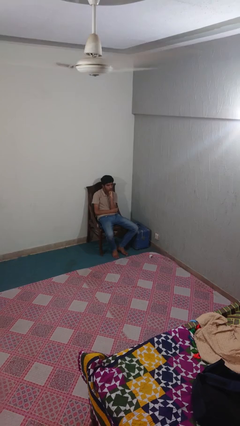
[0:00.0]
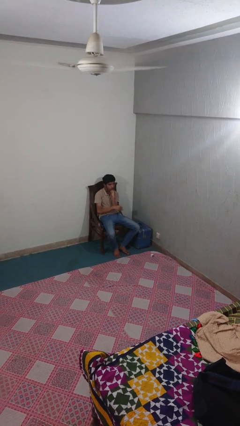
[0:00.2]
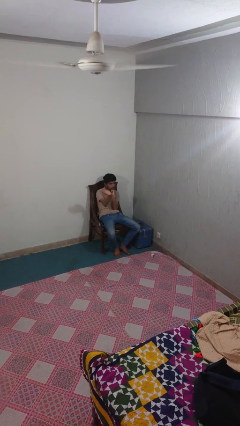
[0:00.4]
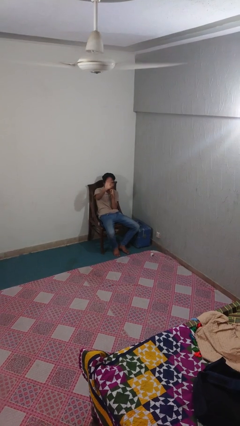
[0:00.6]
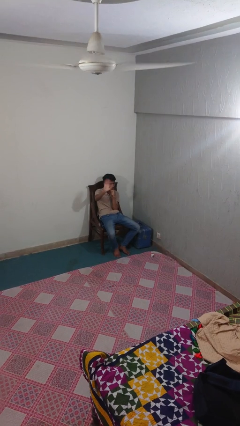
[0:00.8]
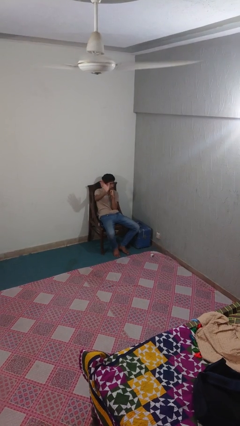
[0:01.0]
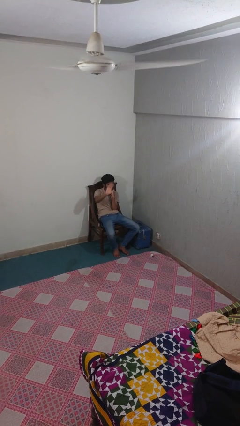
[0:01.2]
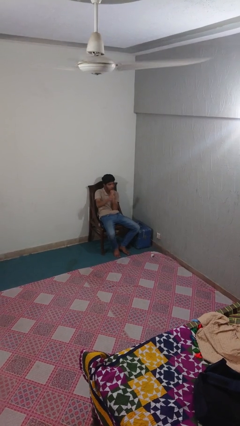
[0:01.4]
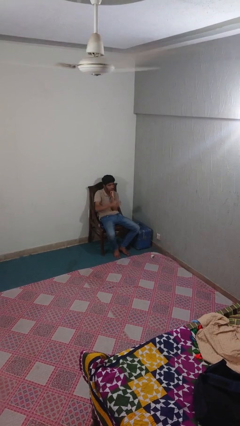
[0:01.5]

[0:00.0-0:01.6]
person waves at person

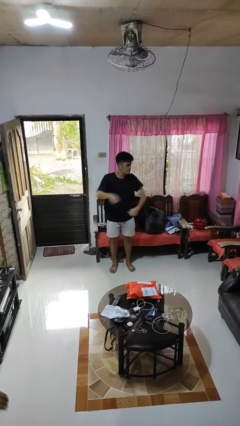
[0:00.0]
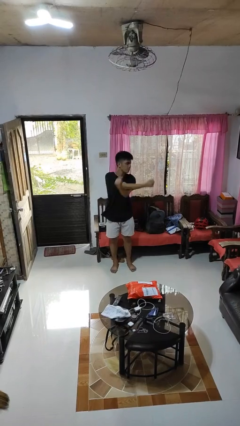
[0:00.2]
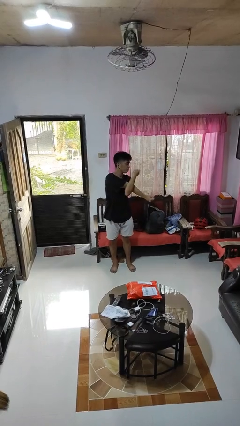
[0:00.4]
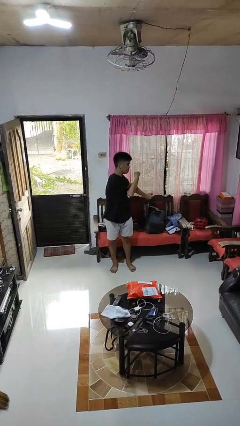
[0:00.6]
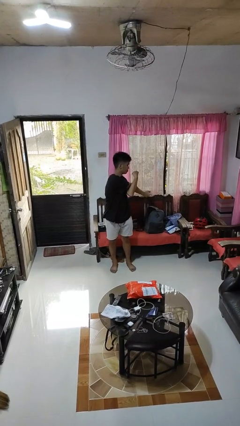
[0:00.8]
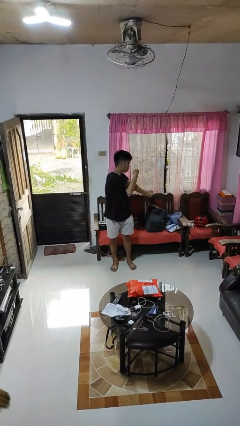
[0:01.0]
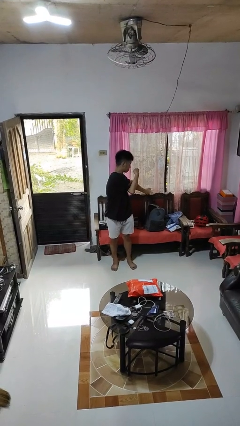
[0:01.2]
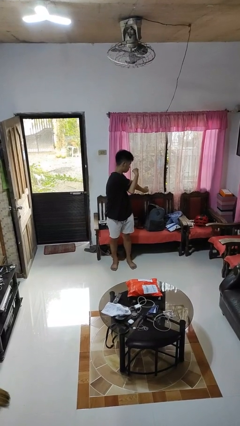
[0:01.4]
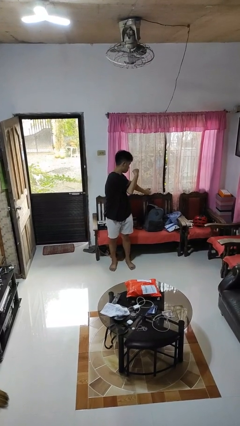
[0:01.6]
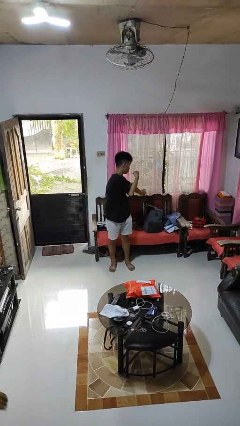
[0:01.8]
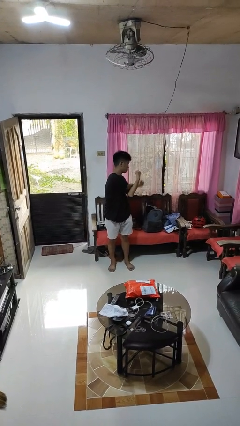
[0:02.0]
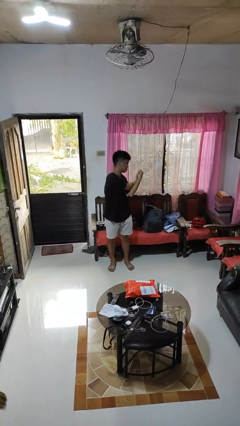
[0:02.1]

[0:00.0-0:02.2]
person stretches arms to side

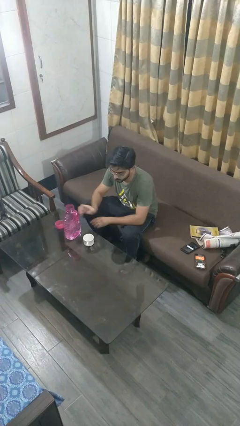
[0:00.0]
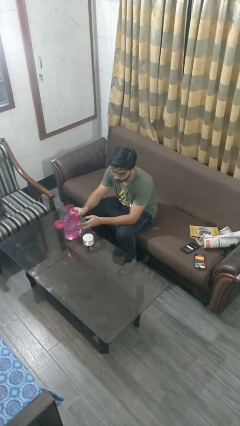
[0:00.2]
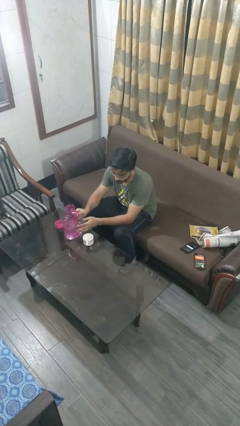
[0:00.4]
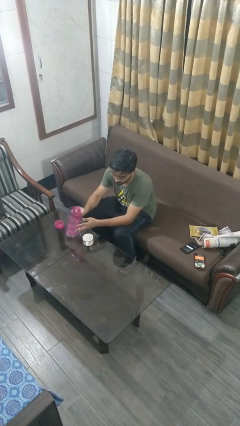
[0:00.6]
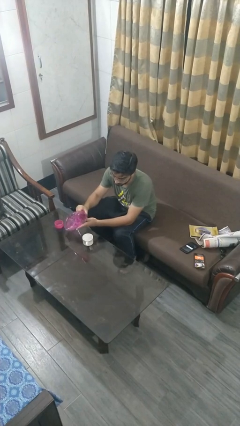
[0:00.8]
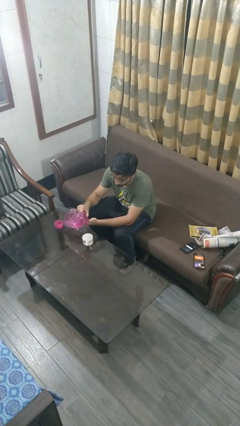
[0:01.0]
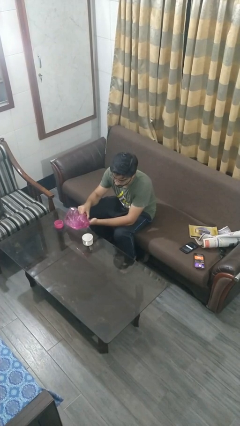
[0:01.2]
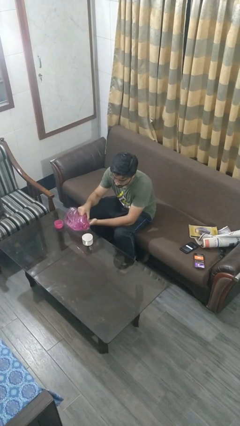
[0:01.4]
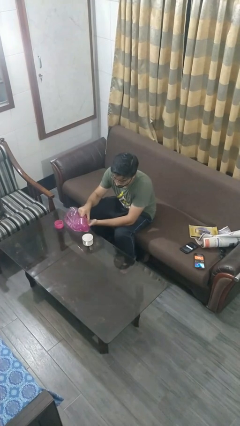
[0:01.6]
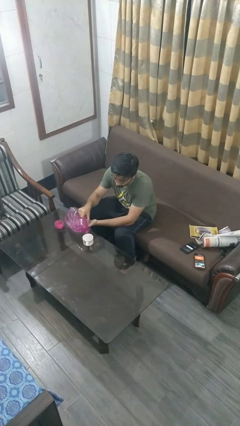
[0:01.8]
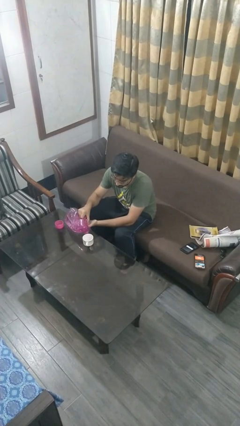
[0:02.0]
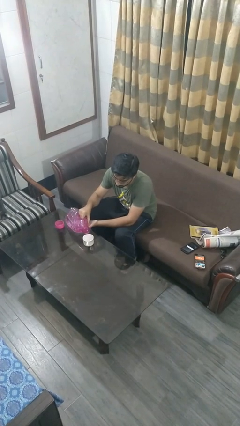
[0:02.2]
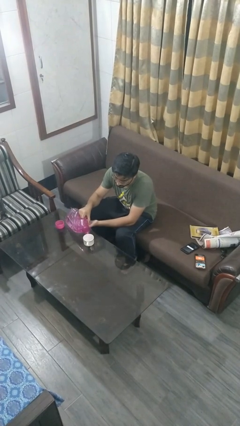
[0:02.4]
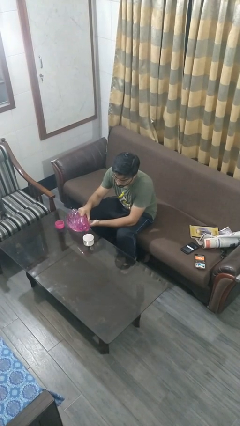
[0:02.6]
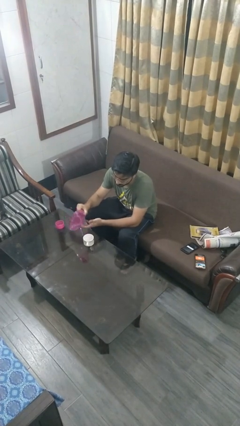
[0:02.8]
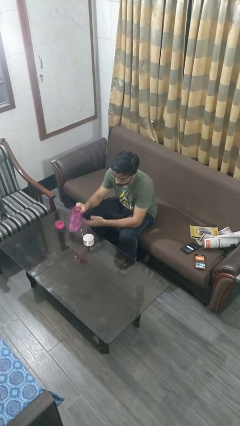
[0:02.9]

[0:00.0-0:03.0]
person pours liquid into cup

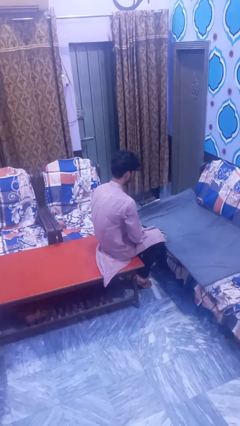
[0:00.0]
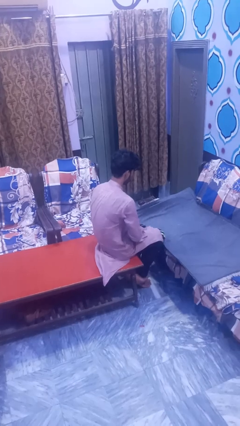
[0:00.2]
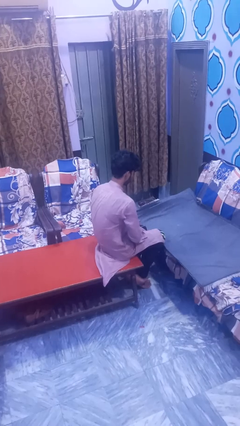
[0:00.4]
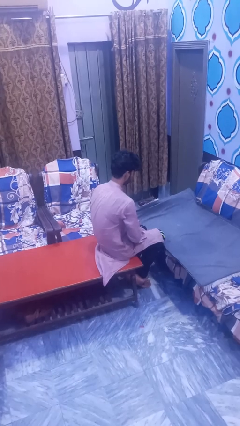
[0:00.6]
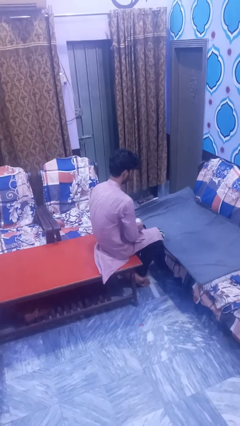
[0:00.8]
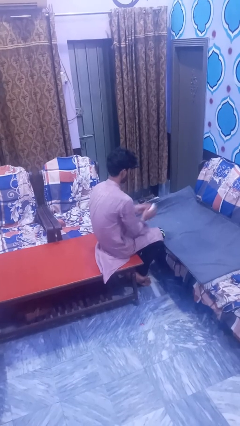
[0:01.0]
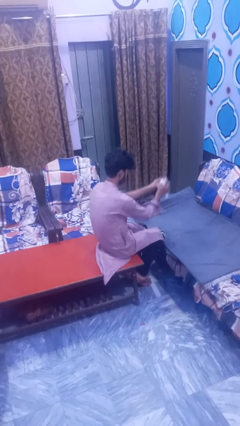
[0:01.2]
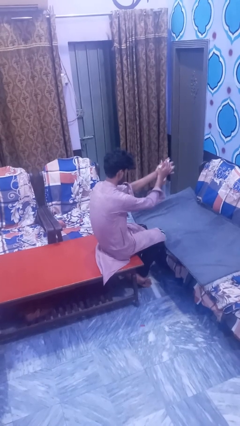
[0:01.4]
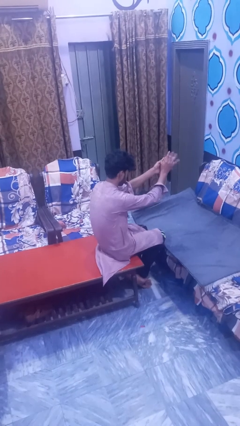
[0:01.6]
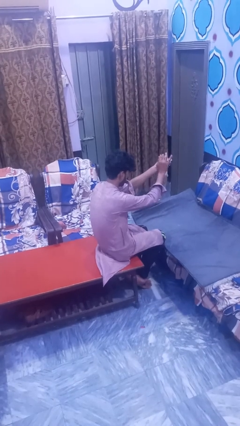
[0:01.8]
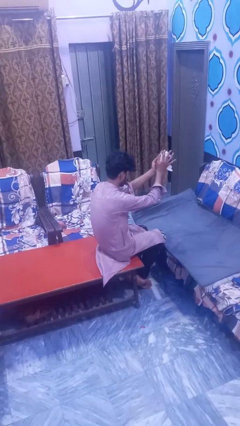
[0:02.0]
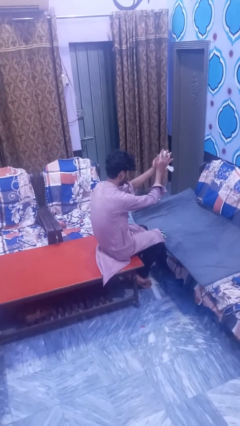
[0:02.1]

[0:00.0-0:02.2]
person crumples paper

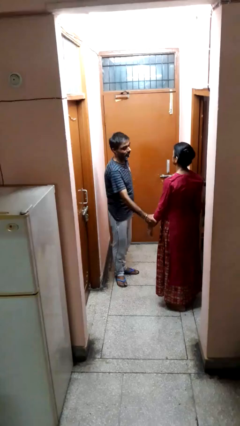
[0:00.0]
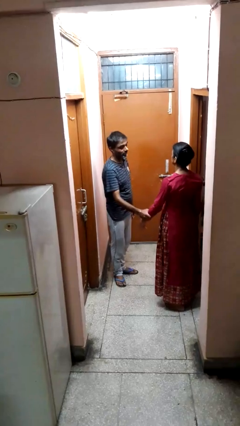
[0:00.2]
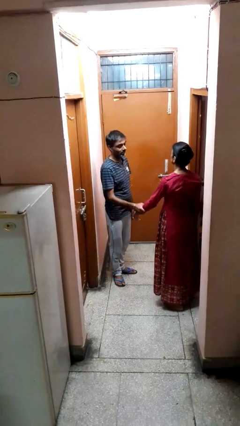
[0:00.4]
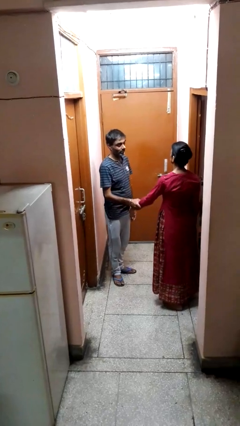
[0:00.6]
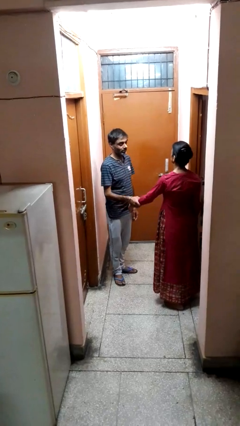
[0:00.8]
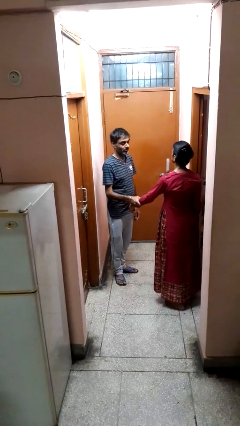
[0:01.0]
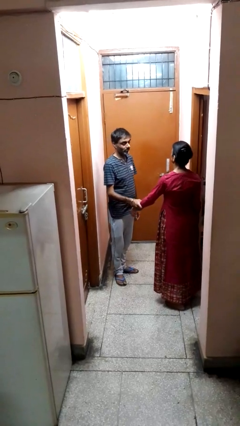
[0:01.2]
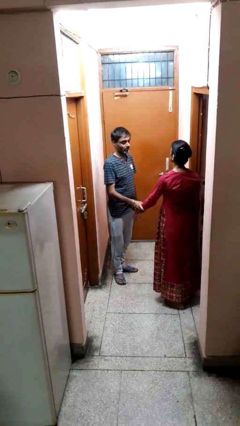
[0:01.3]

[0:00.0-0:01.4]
person grabs person by forearm

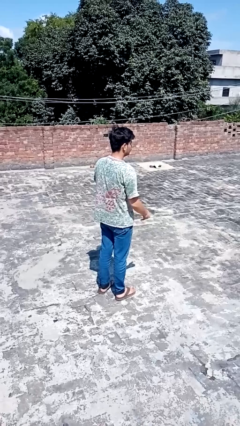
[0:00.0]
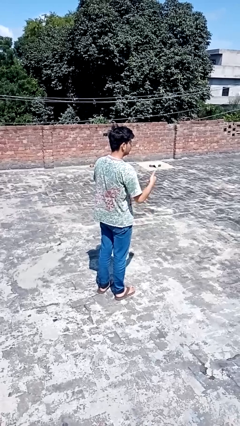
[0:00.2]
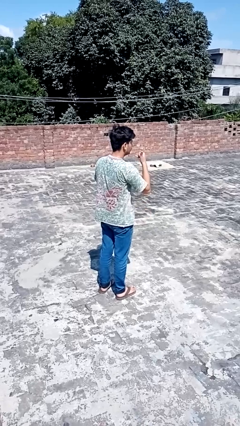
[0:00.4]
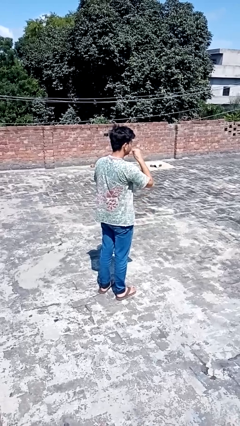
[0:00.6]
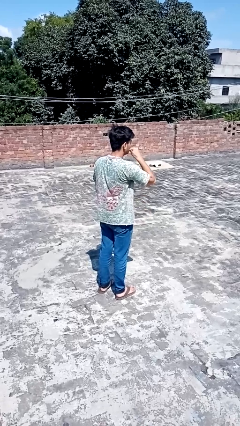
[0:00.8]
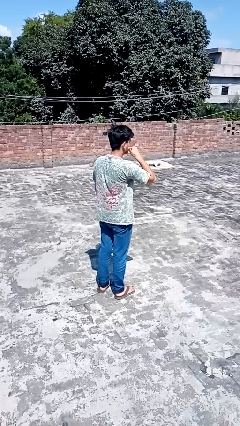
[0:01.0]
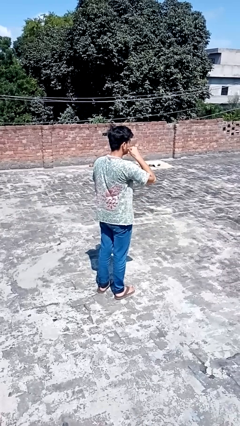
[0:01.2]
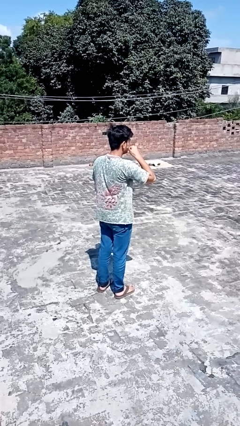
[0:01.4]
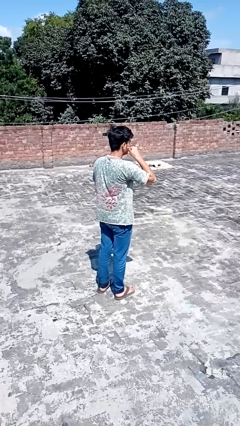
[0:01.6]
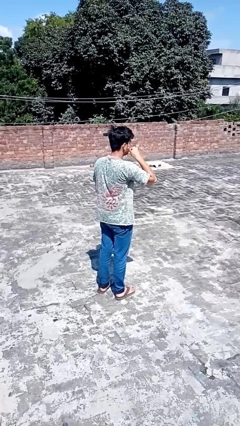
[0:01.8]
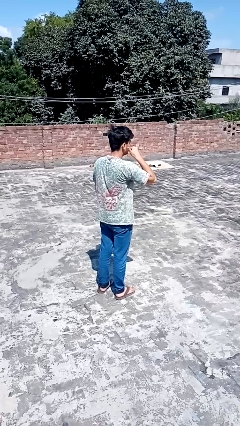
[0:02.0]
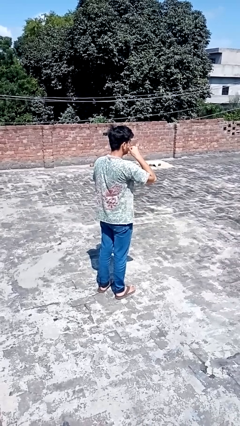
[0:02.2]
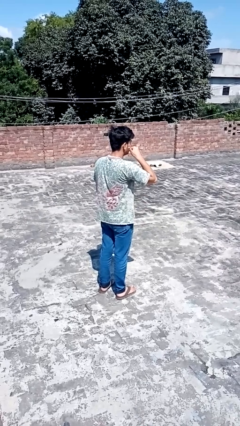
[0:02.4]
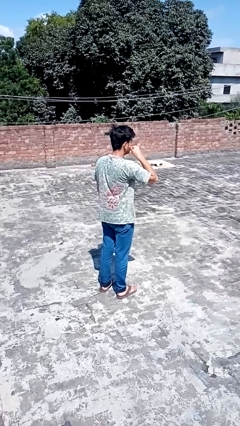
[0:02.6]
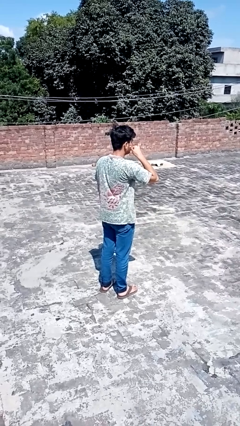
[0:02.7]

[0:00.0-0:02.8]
person gestures call me

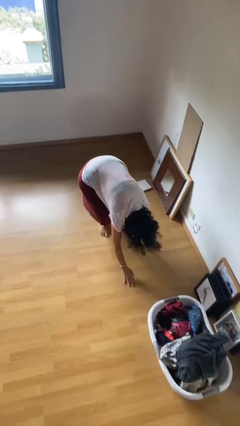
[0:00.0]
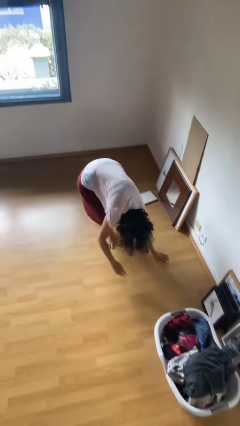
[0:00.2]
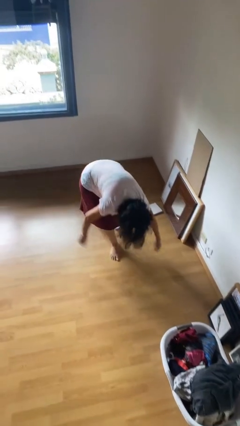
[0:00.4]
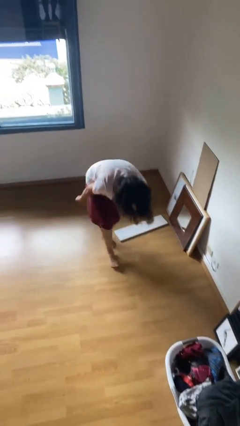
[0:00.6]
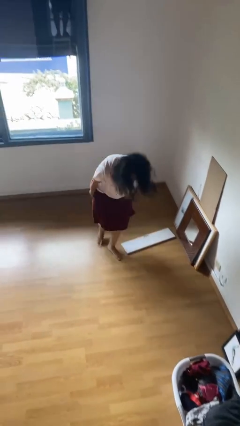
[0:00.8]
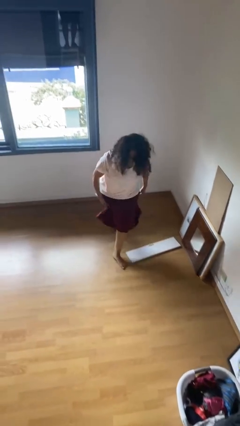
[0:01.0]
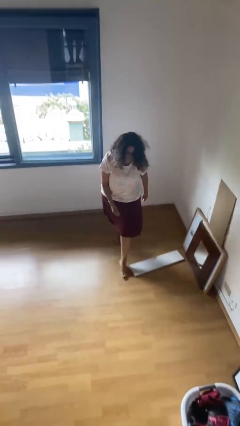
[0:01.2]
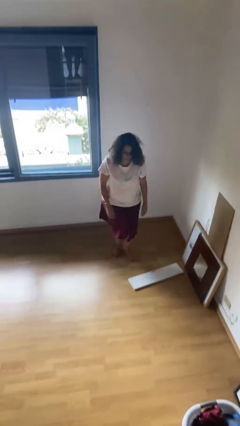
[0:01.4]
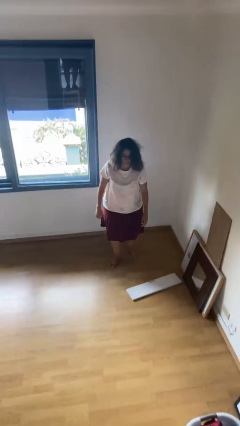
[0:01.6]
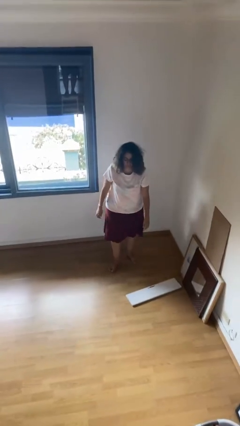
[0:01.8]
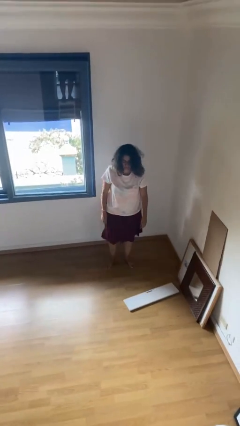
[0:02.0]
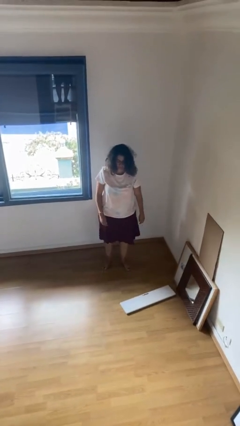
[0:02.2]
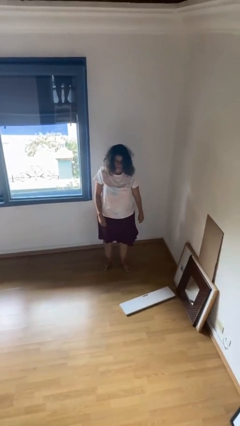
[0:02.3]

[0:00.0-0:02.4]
person stands up from floor

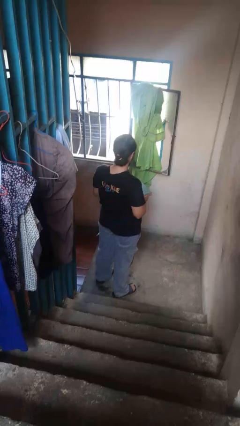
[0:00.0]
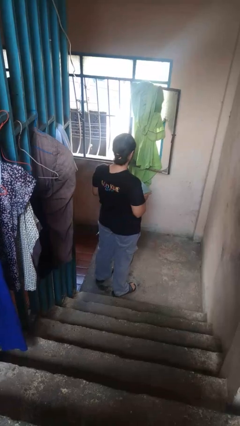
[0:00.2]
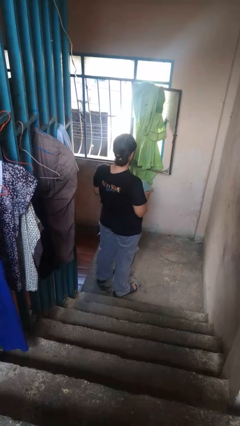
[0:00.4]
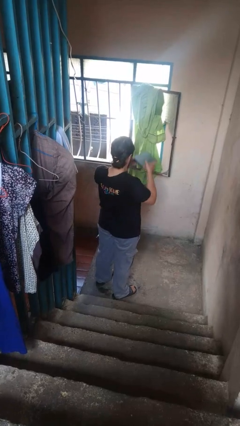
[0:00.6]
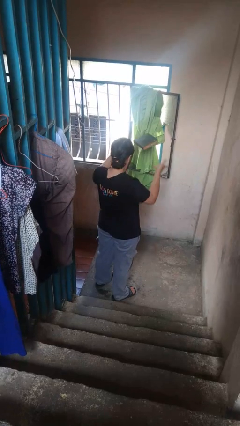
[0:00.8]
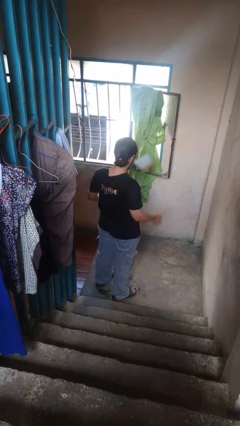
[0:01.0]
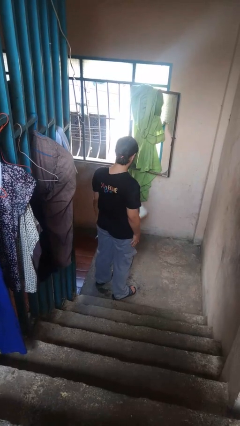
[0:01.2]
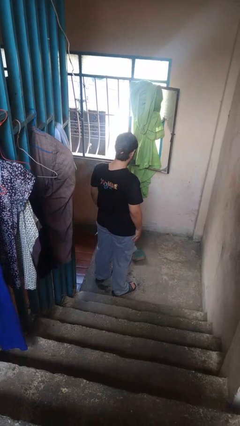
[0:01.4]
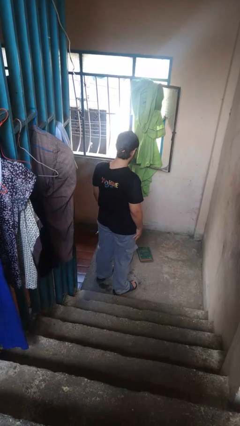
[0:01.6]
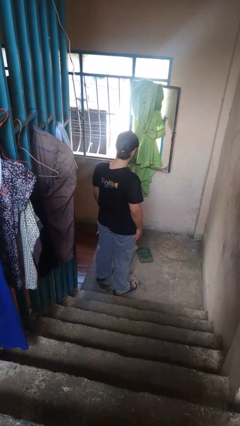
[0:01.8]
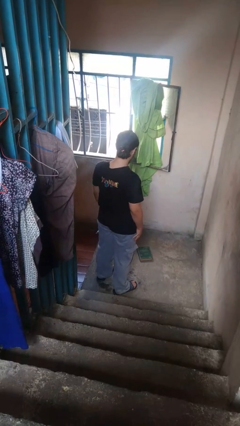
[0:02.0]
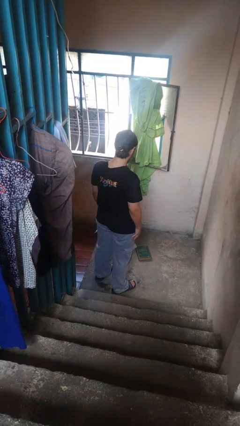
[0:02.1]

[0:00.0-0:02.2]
person throws object into air
